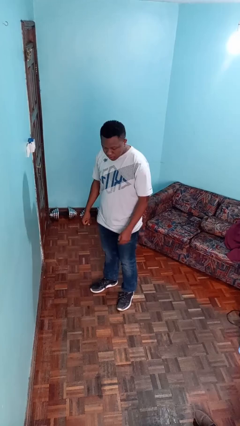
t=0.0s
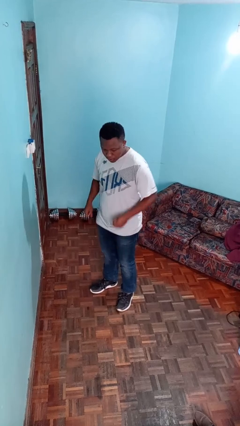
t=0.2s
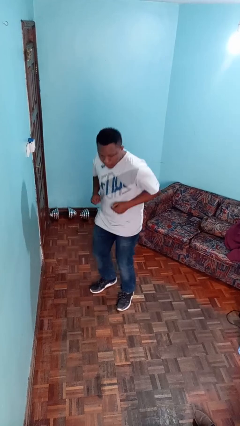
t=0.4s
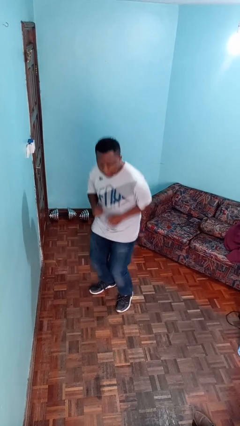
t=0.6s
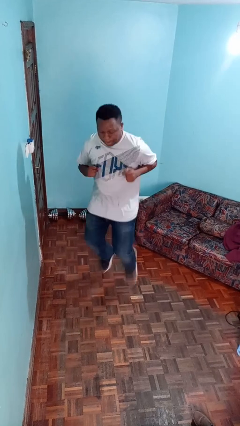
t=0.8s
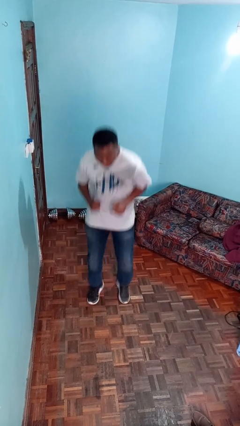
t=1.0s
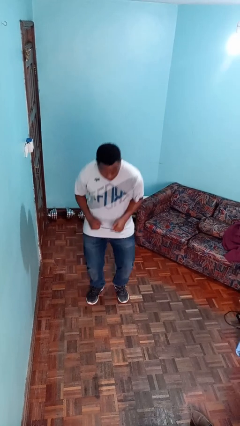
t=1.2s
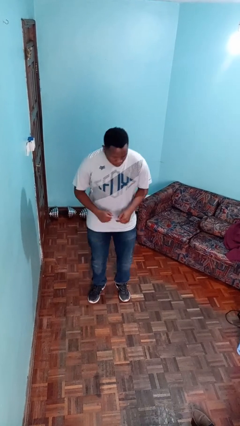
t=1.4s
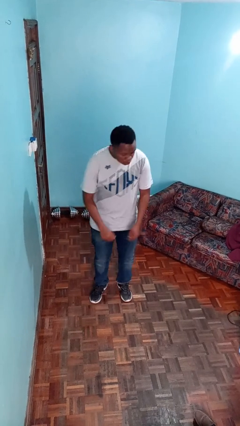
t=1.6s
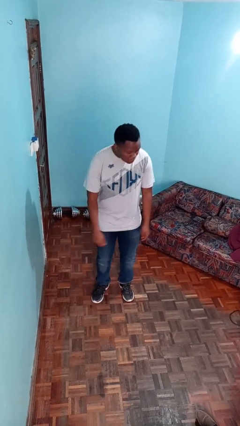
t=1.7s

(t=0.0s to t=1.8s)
person jumps

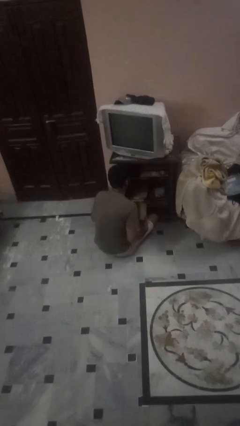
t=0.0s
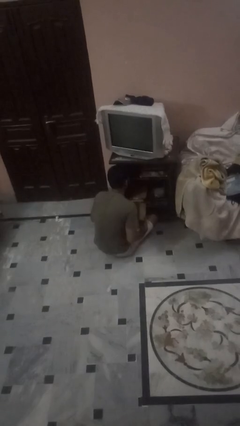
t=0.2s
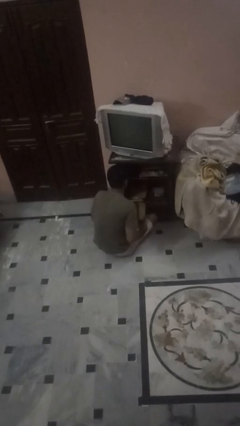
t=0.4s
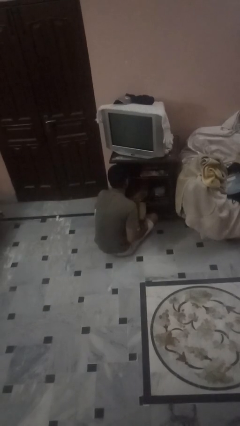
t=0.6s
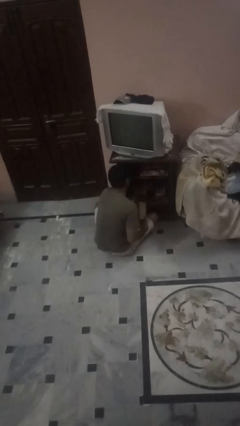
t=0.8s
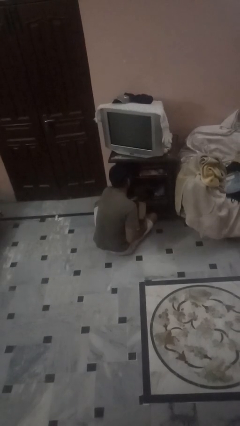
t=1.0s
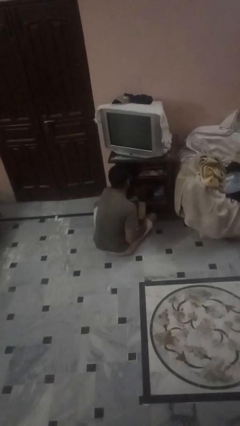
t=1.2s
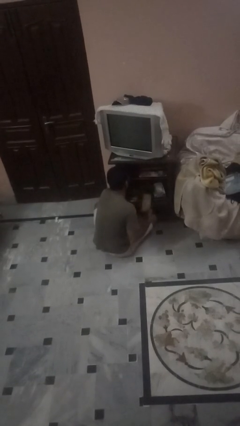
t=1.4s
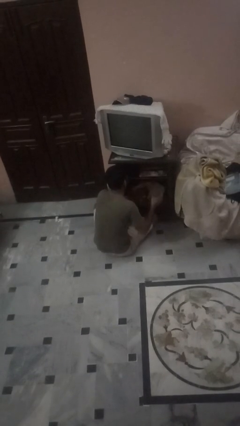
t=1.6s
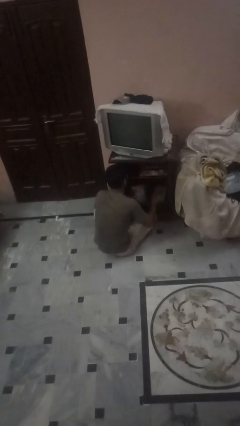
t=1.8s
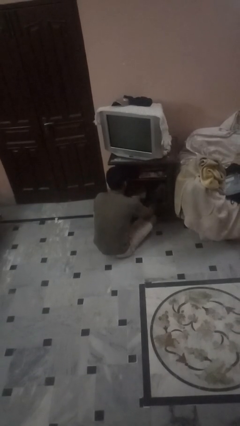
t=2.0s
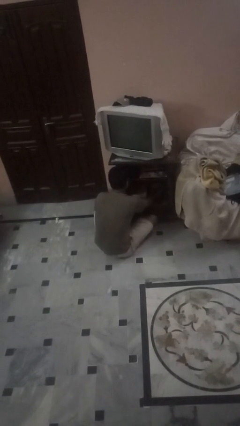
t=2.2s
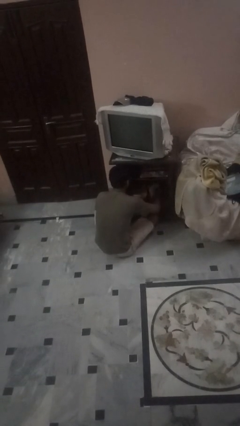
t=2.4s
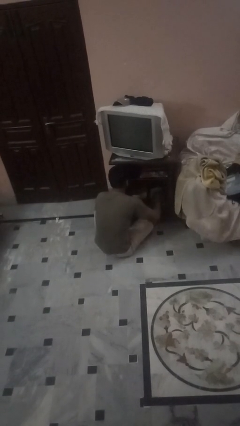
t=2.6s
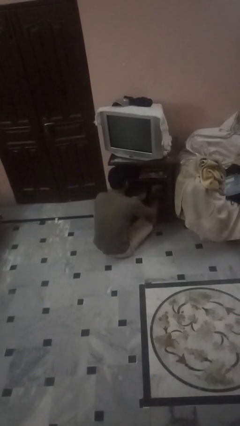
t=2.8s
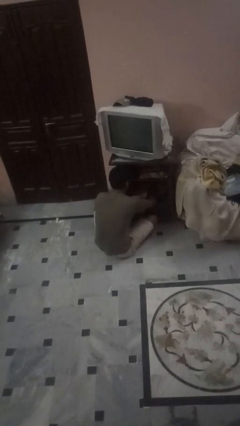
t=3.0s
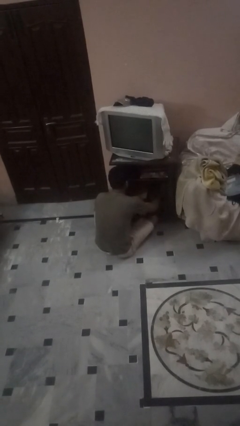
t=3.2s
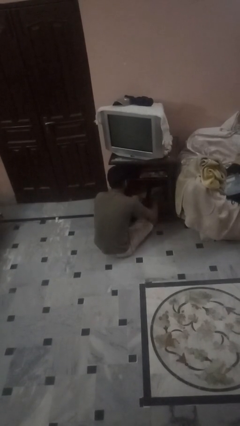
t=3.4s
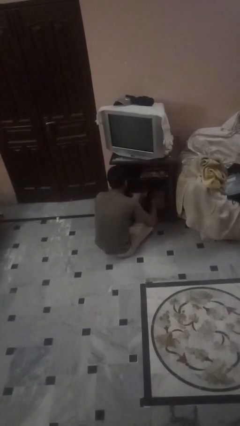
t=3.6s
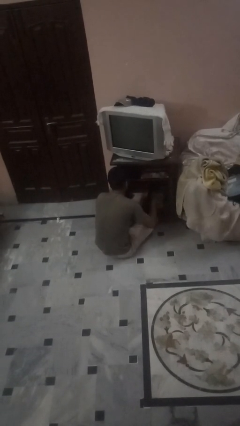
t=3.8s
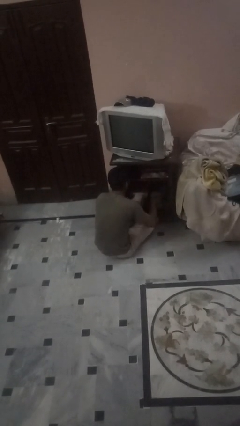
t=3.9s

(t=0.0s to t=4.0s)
person dusts furniture

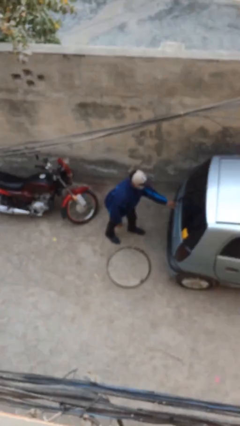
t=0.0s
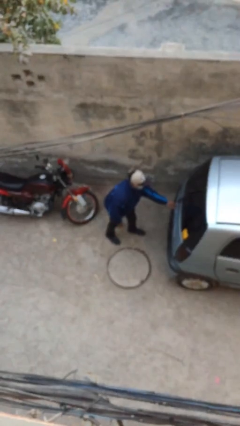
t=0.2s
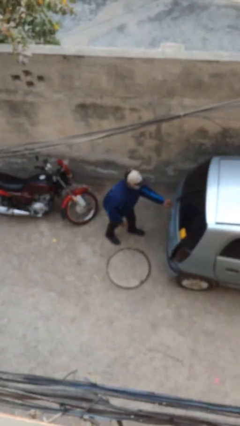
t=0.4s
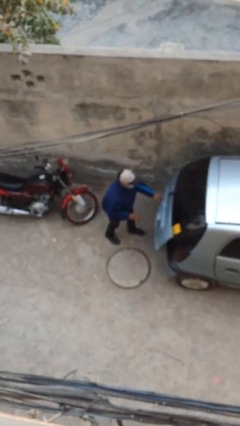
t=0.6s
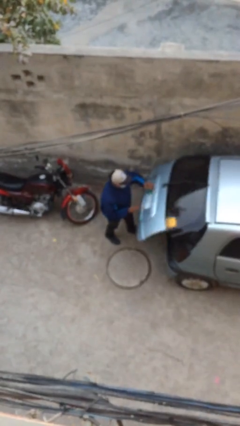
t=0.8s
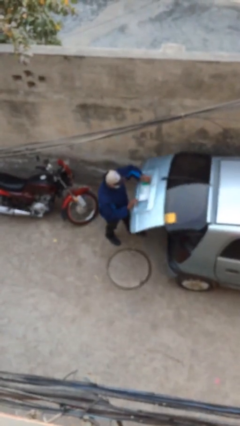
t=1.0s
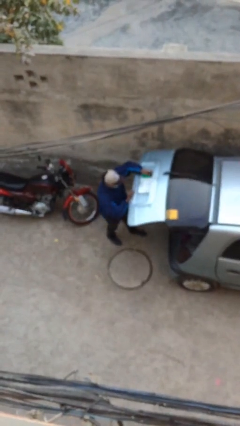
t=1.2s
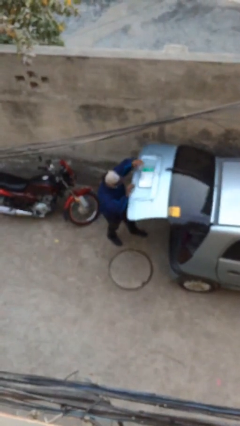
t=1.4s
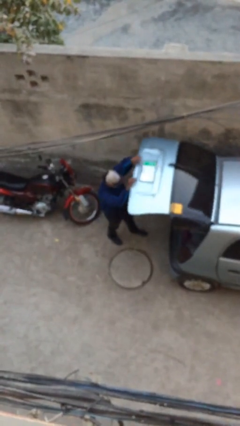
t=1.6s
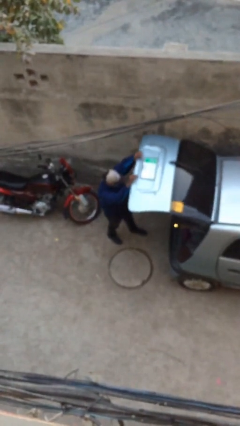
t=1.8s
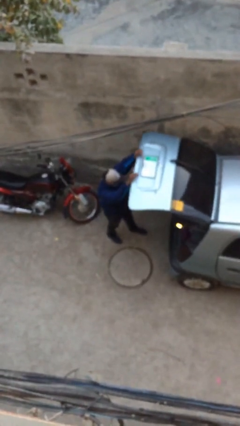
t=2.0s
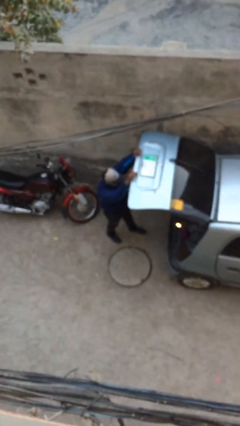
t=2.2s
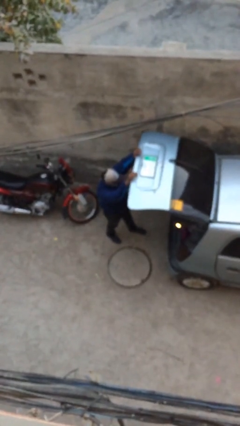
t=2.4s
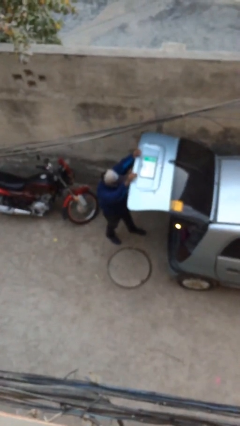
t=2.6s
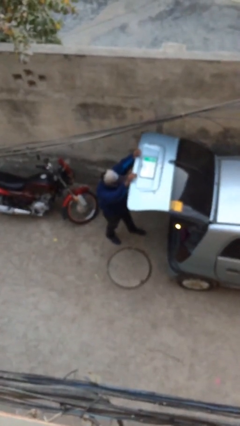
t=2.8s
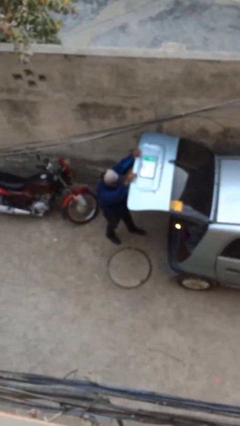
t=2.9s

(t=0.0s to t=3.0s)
person opens car trunk

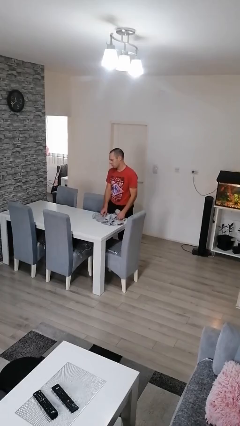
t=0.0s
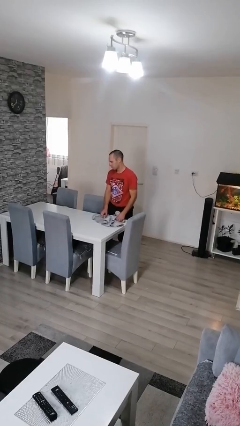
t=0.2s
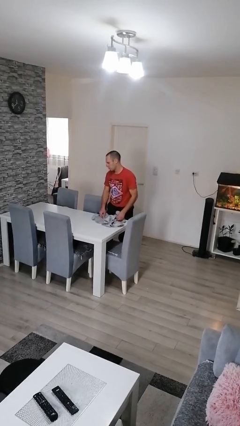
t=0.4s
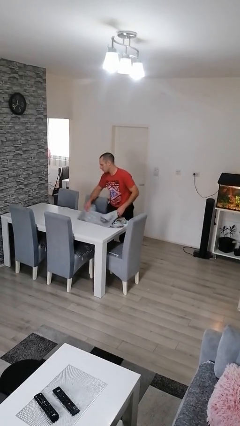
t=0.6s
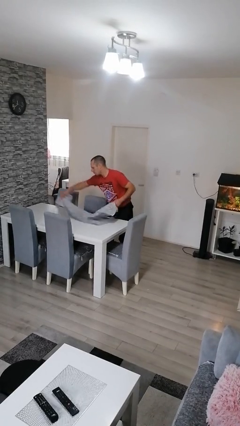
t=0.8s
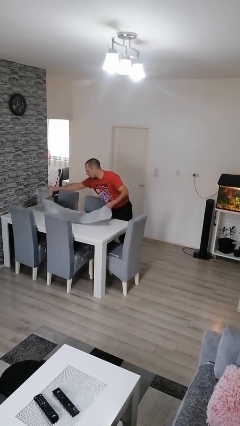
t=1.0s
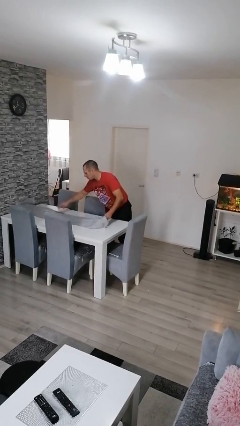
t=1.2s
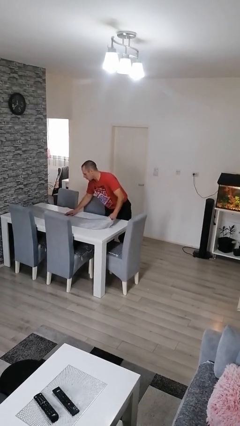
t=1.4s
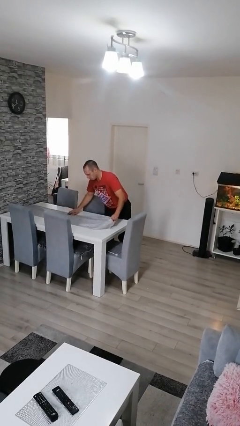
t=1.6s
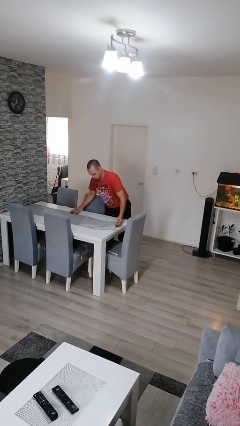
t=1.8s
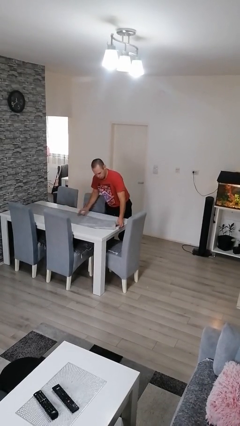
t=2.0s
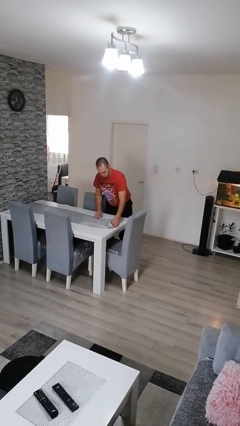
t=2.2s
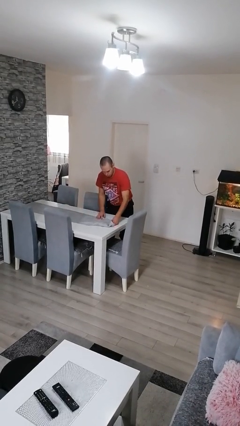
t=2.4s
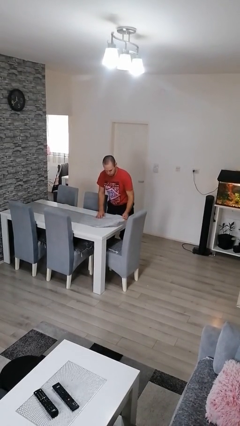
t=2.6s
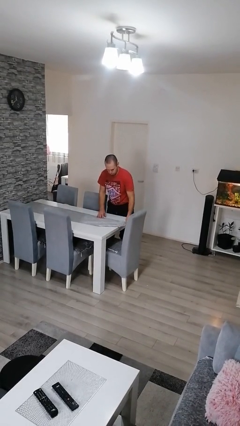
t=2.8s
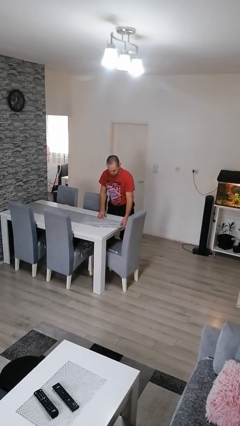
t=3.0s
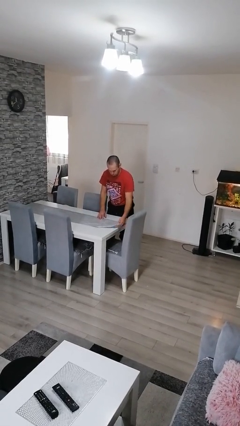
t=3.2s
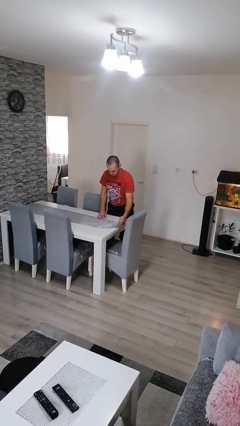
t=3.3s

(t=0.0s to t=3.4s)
person spreads tablecloth

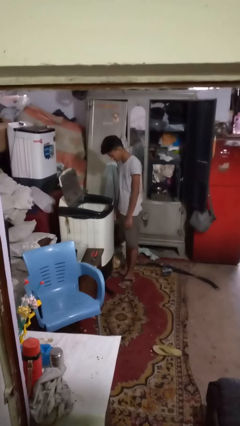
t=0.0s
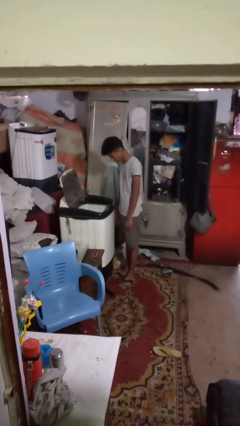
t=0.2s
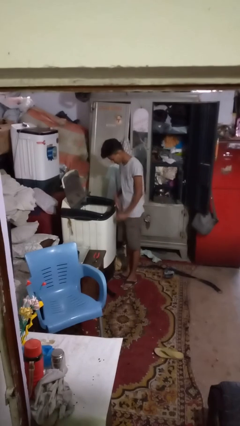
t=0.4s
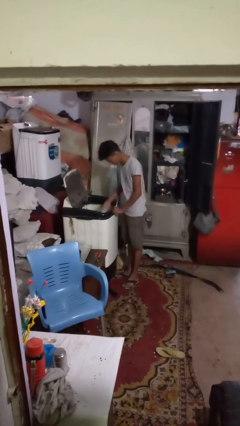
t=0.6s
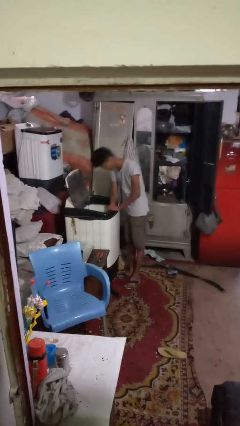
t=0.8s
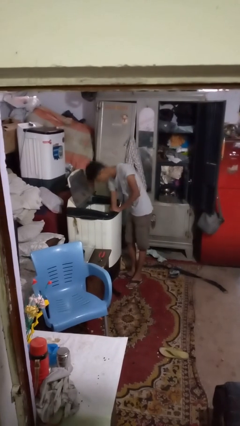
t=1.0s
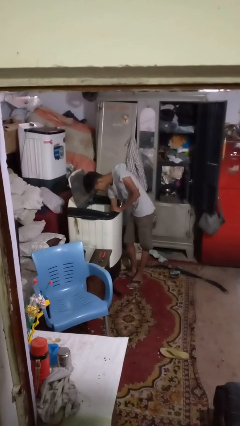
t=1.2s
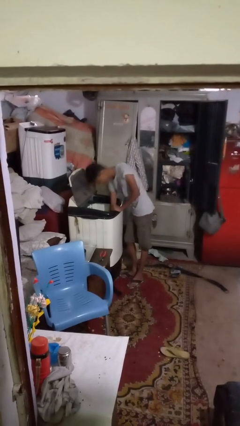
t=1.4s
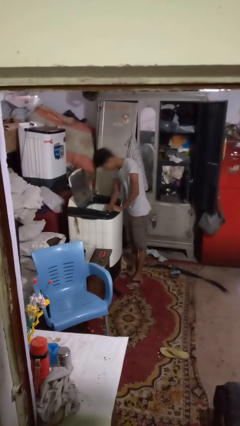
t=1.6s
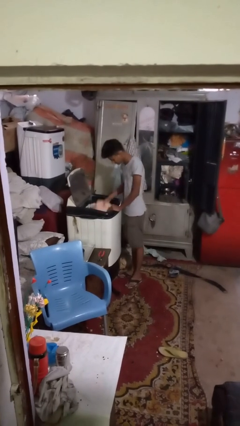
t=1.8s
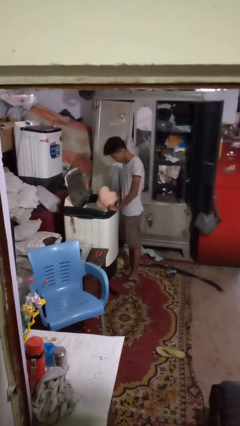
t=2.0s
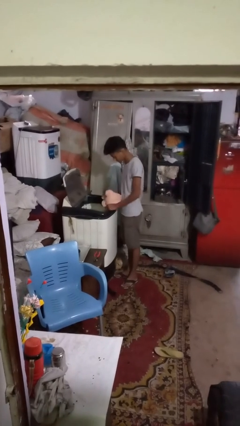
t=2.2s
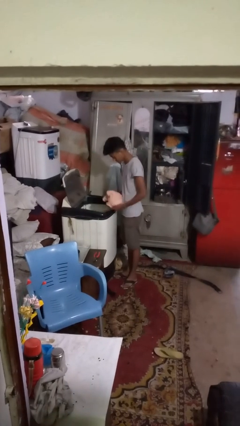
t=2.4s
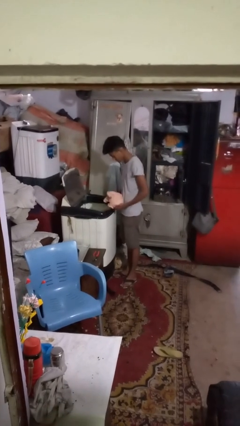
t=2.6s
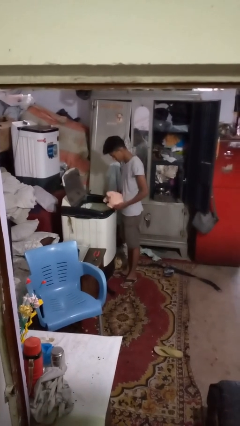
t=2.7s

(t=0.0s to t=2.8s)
person unloads clotheswasher

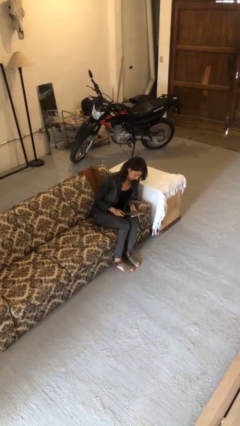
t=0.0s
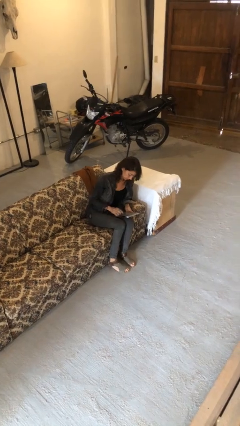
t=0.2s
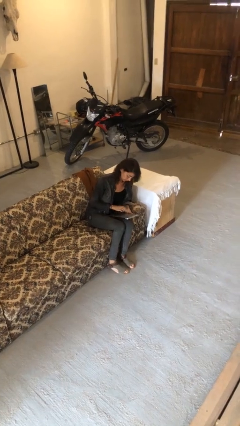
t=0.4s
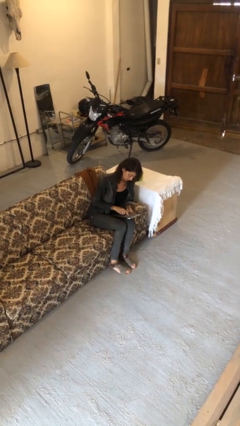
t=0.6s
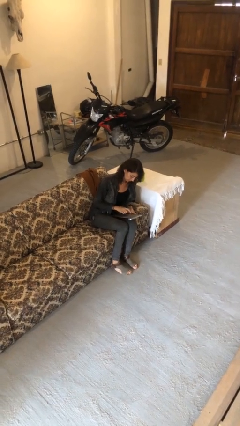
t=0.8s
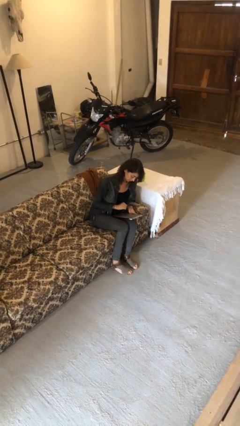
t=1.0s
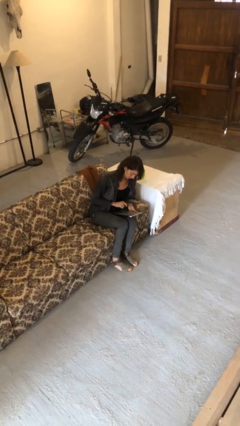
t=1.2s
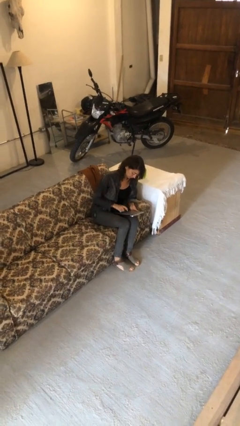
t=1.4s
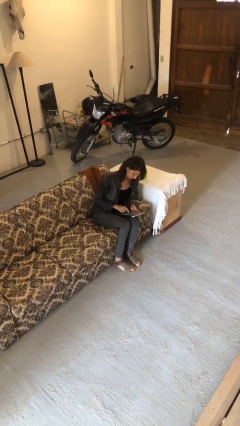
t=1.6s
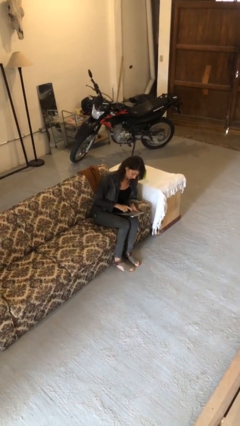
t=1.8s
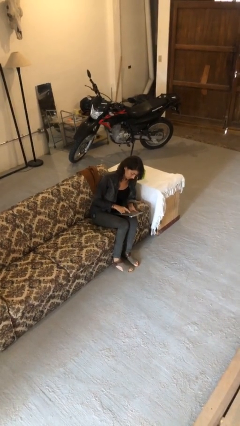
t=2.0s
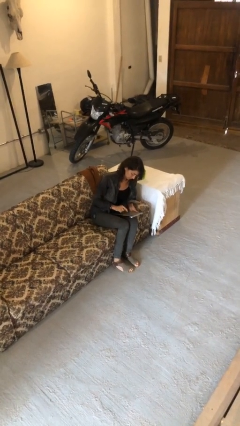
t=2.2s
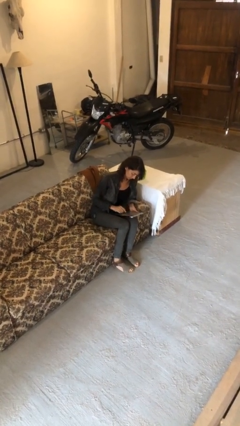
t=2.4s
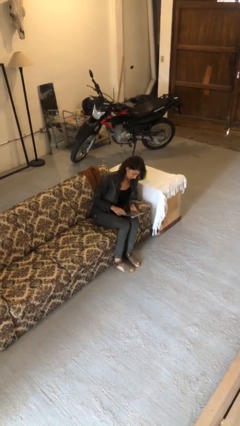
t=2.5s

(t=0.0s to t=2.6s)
person interacts with tablet
